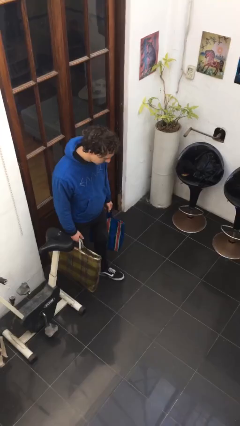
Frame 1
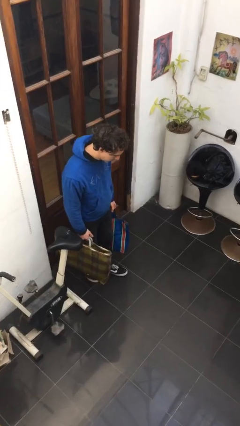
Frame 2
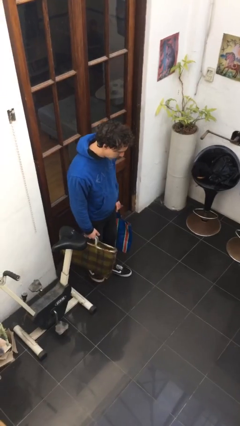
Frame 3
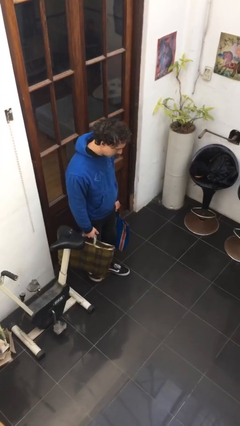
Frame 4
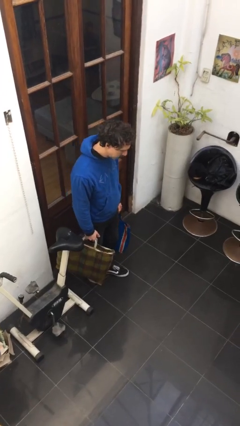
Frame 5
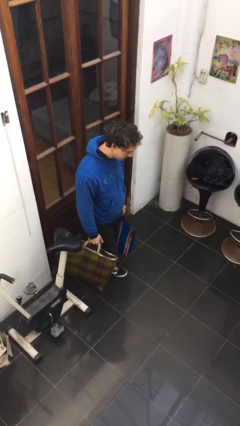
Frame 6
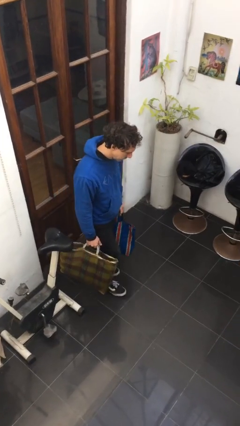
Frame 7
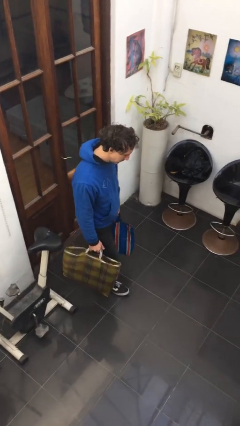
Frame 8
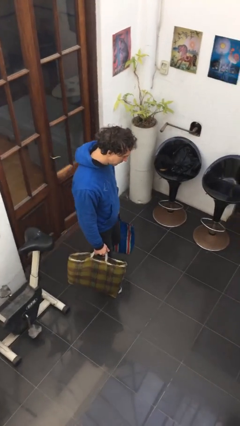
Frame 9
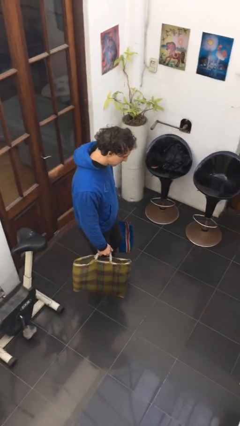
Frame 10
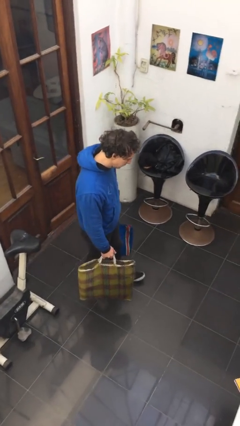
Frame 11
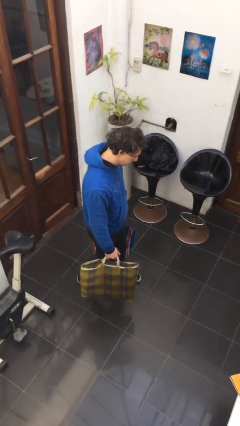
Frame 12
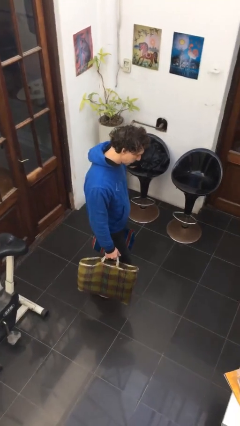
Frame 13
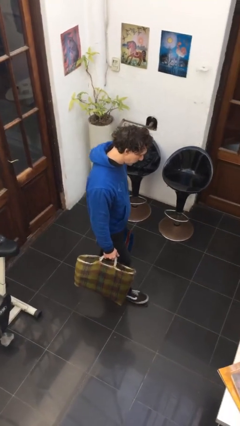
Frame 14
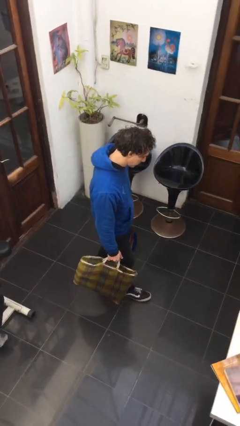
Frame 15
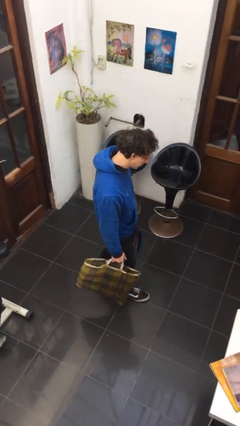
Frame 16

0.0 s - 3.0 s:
person carries groceries

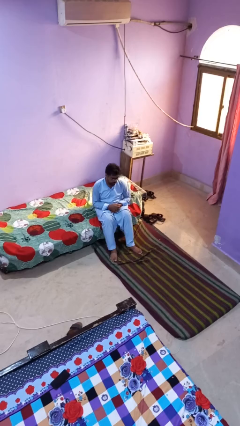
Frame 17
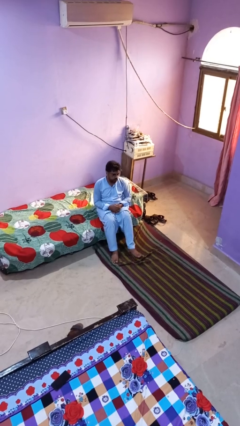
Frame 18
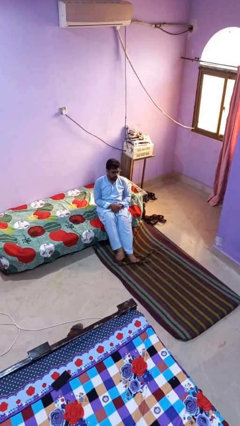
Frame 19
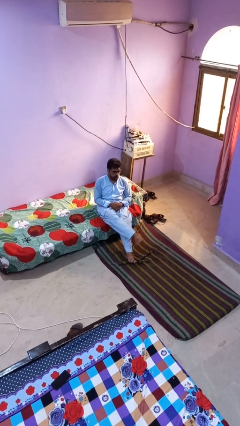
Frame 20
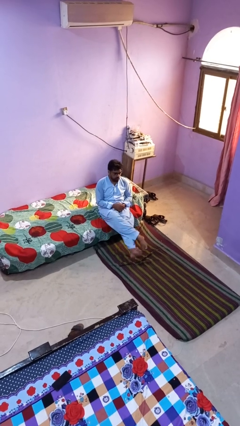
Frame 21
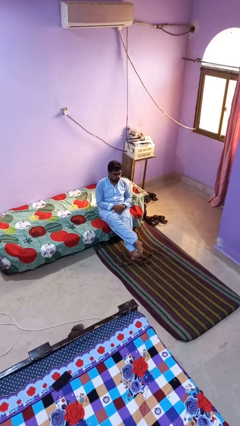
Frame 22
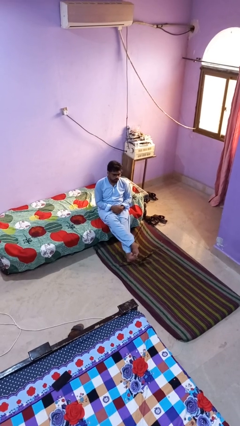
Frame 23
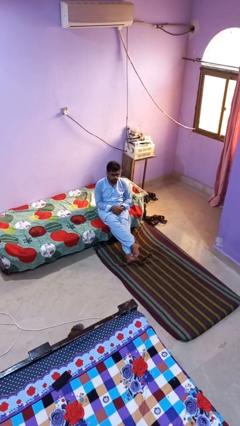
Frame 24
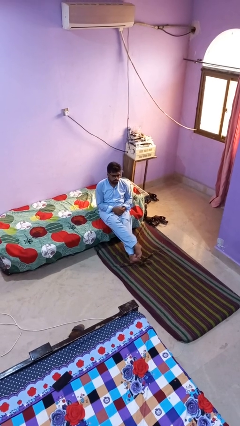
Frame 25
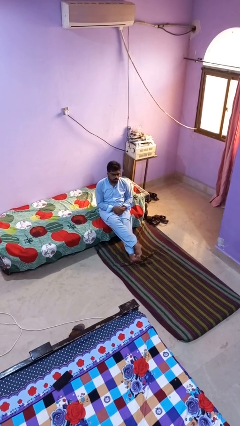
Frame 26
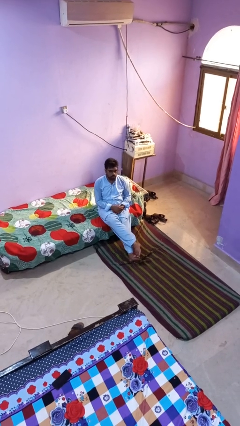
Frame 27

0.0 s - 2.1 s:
person crosses legs

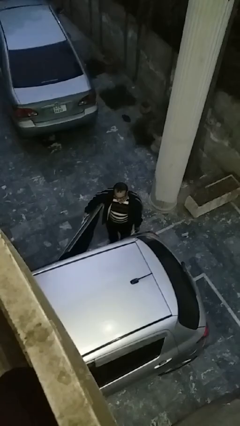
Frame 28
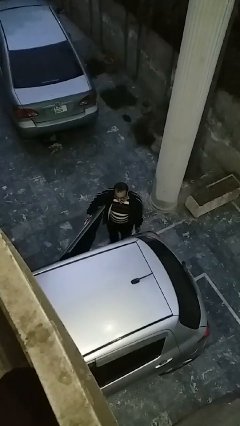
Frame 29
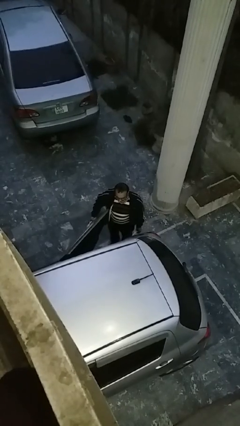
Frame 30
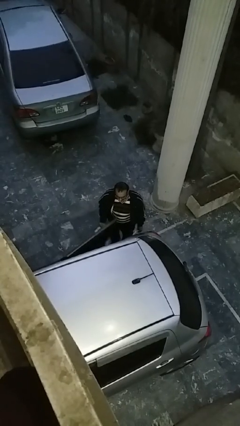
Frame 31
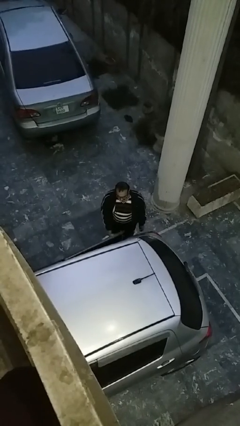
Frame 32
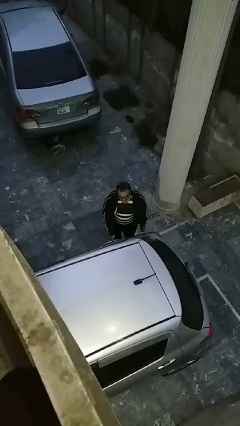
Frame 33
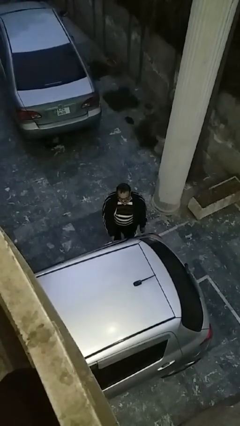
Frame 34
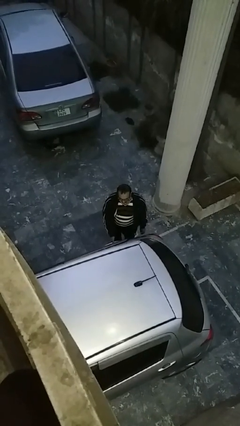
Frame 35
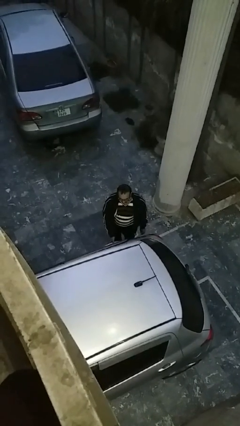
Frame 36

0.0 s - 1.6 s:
person closes car door

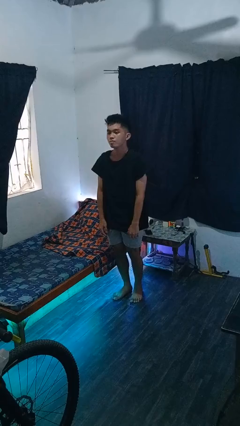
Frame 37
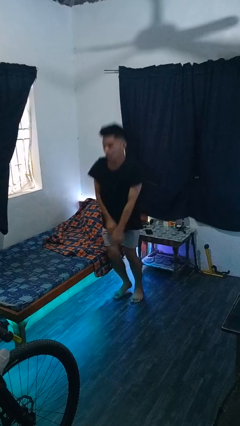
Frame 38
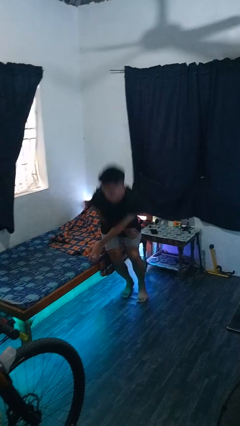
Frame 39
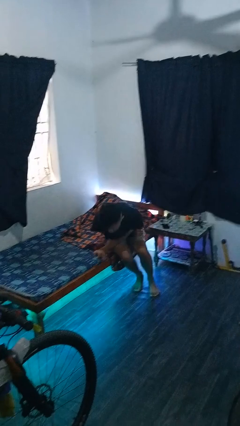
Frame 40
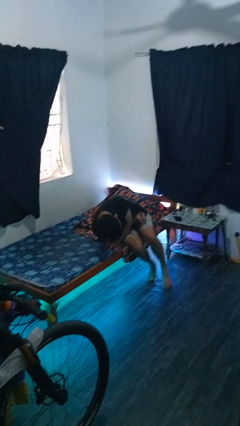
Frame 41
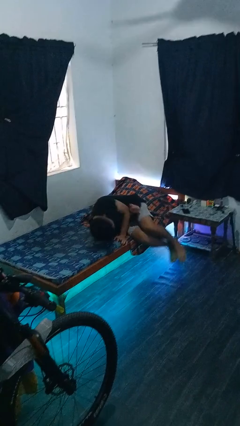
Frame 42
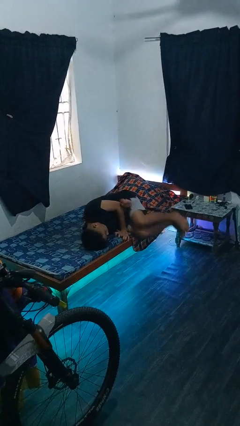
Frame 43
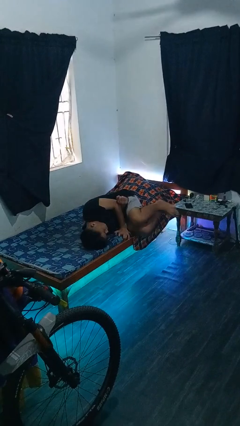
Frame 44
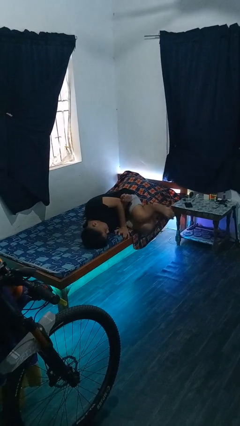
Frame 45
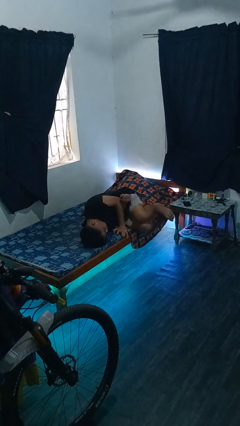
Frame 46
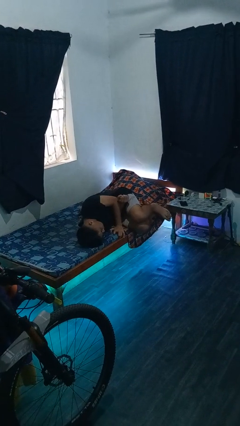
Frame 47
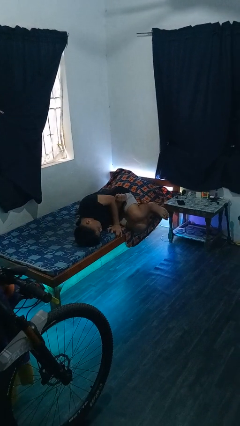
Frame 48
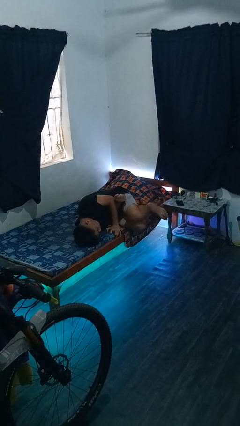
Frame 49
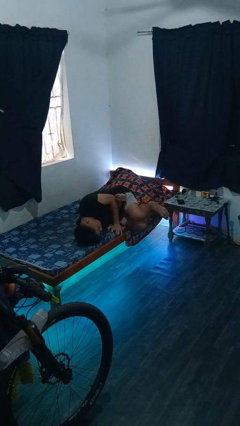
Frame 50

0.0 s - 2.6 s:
person lies down on bed

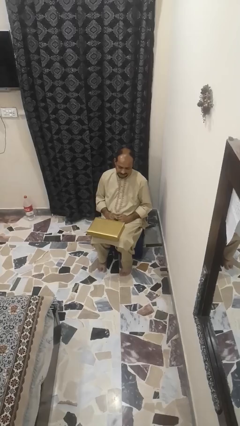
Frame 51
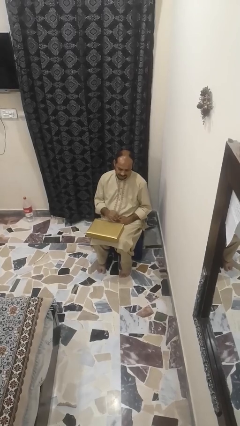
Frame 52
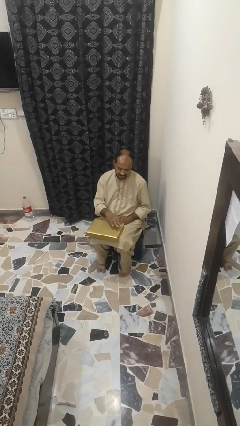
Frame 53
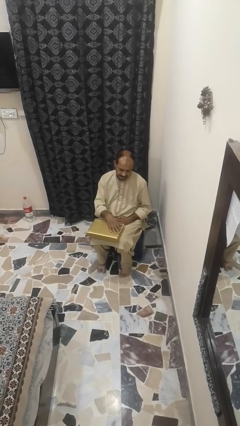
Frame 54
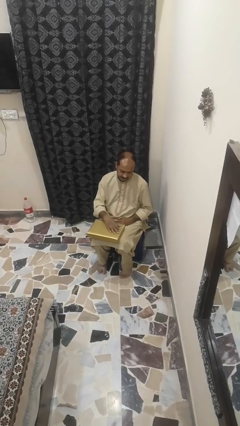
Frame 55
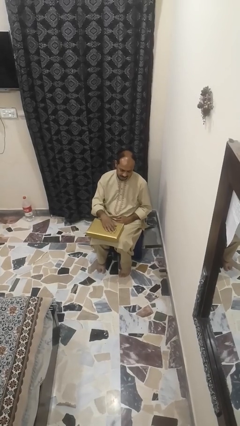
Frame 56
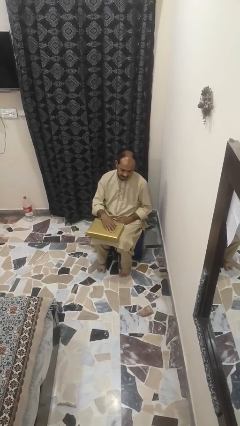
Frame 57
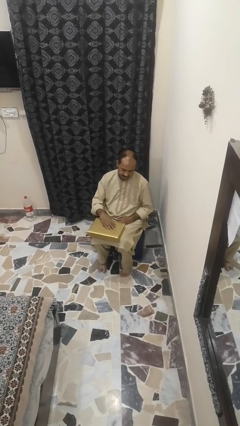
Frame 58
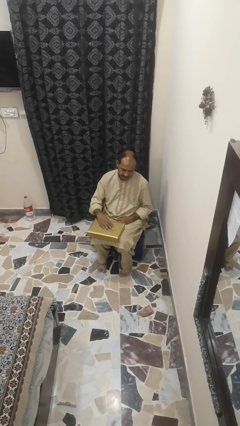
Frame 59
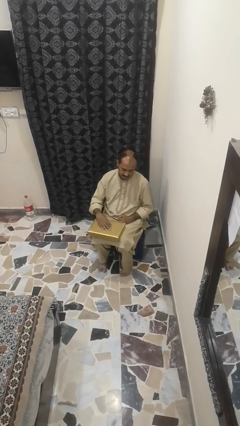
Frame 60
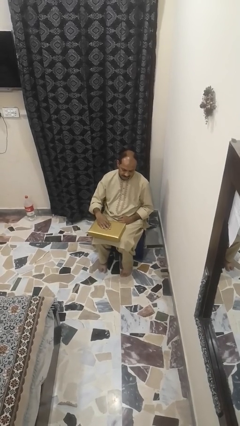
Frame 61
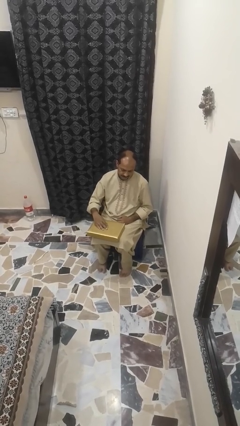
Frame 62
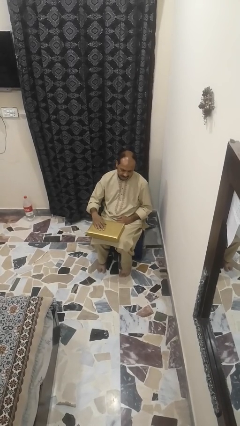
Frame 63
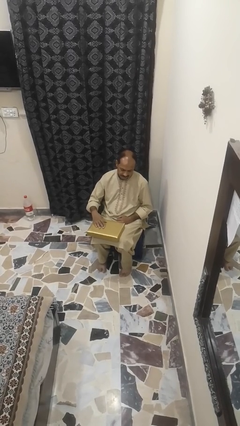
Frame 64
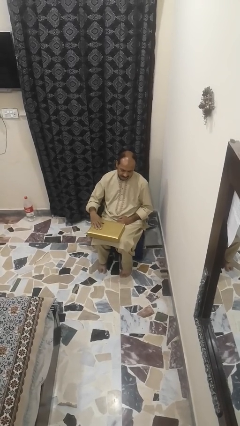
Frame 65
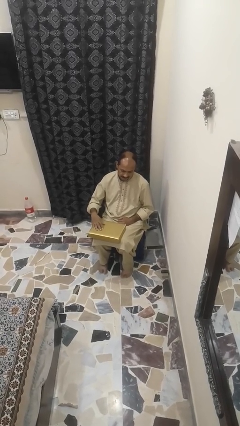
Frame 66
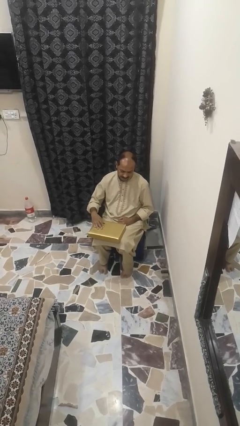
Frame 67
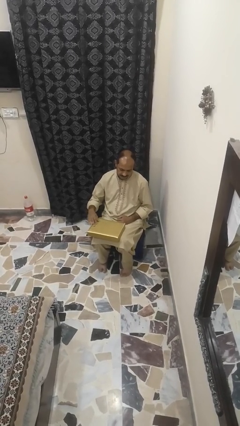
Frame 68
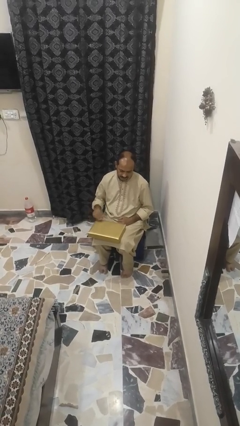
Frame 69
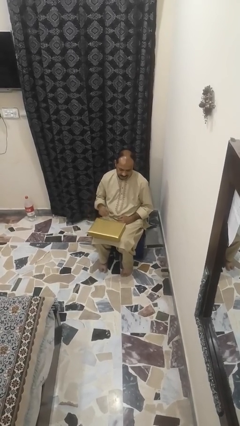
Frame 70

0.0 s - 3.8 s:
person waves hand over object

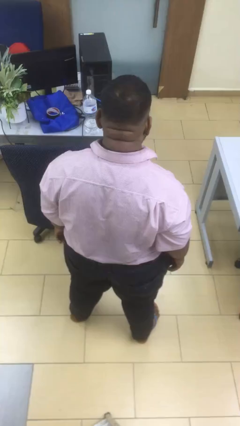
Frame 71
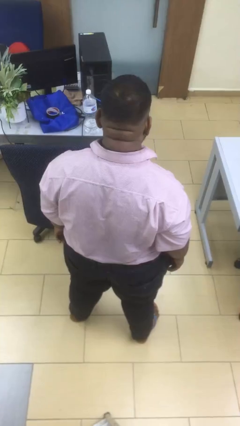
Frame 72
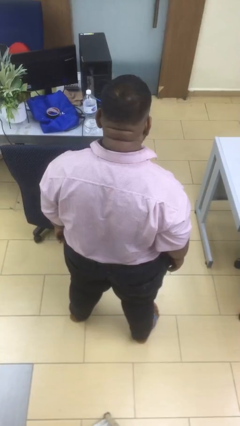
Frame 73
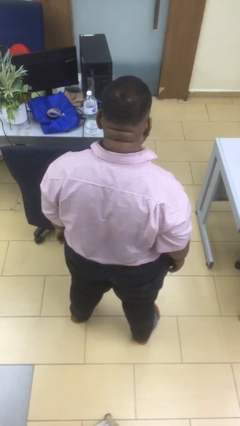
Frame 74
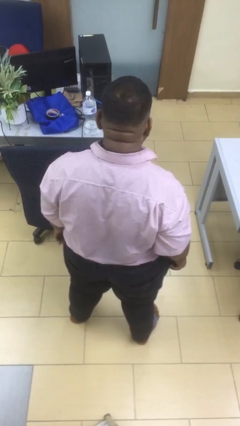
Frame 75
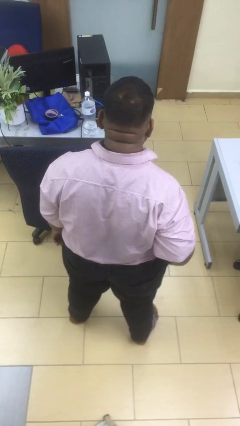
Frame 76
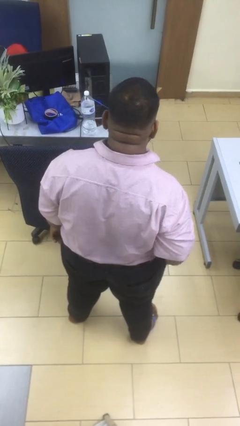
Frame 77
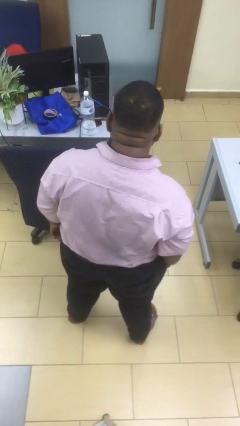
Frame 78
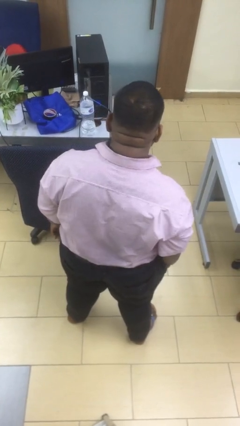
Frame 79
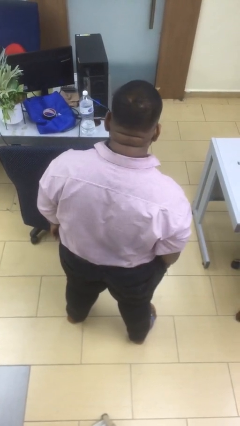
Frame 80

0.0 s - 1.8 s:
person puts hands in back pockets

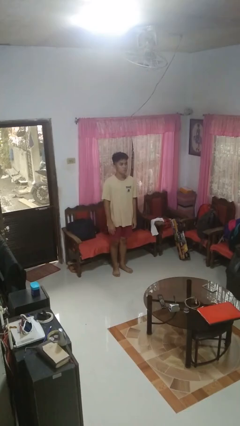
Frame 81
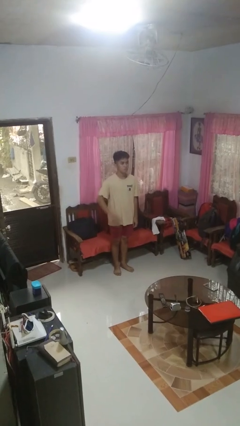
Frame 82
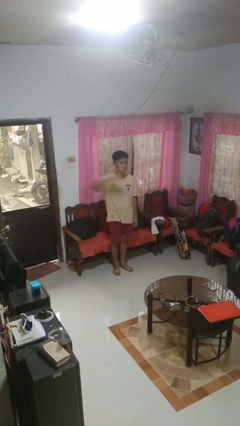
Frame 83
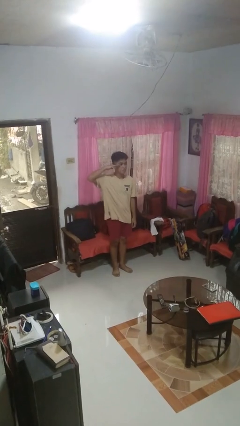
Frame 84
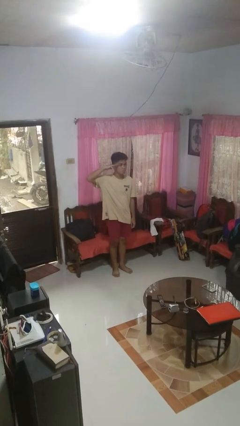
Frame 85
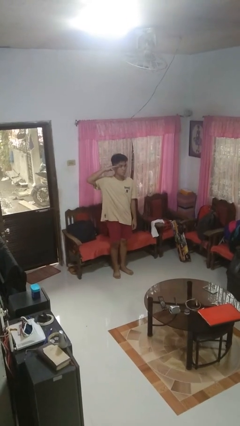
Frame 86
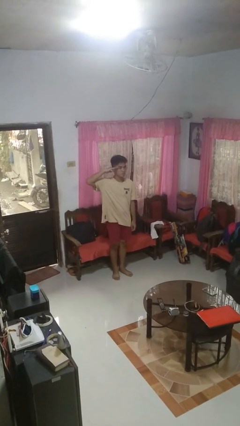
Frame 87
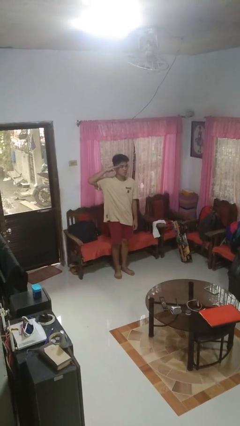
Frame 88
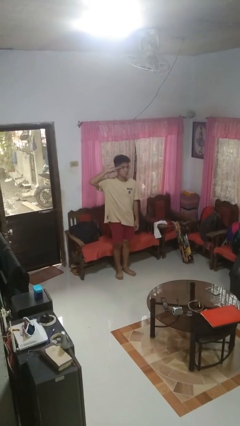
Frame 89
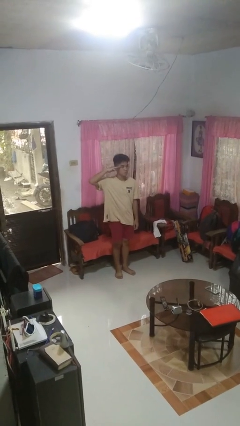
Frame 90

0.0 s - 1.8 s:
person salutes

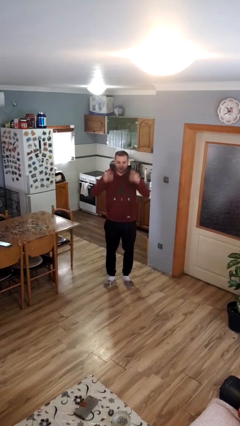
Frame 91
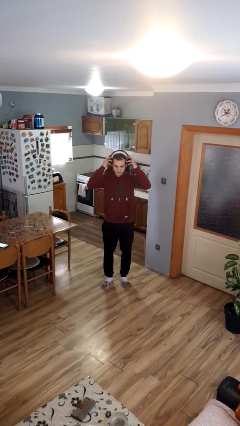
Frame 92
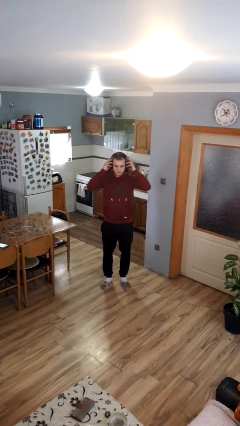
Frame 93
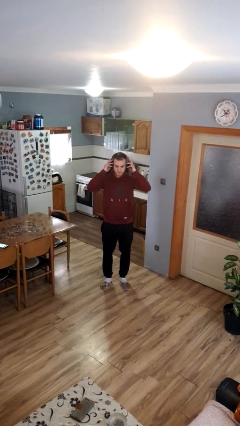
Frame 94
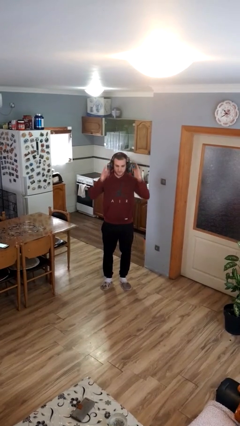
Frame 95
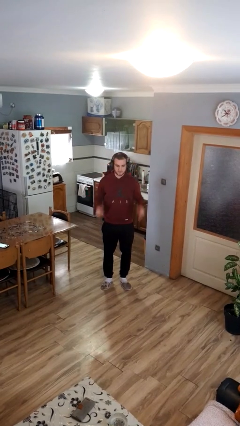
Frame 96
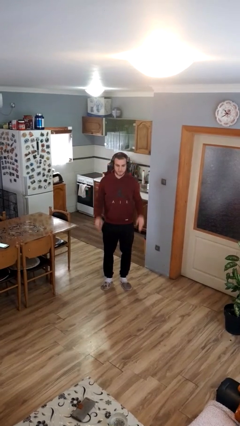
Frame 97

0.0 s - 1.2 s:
person puts on headphones
